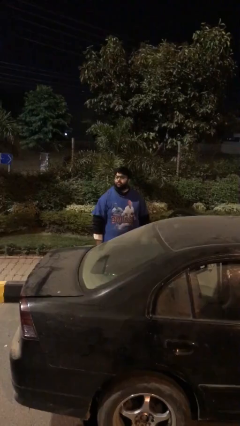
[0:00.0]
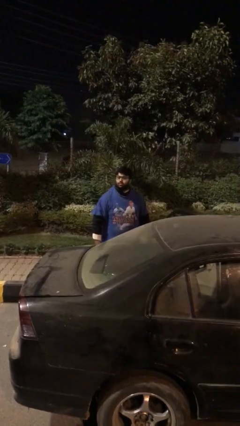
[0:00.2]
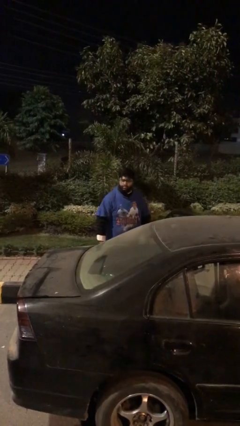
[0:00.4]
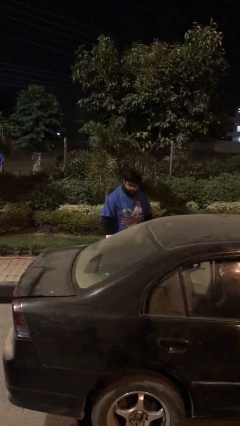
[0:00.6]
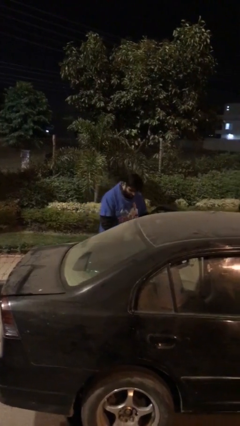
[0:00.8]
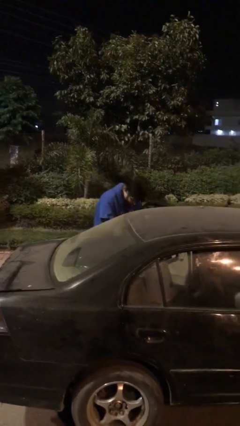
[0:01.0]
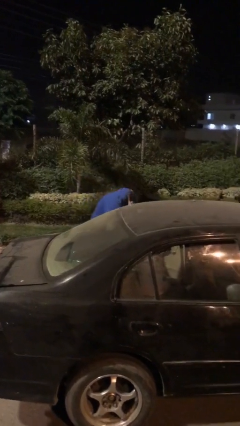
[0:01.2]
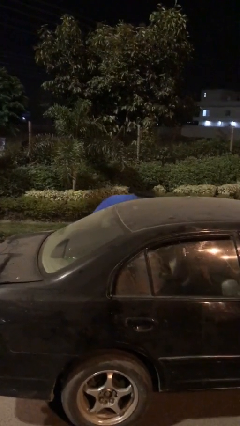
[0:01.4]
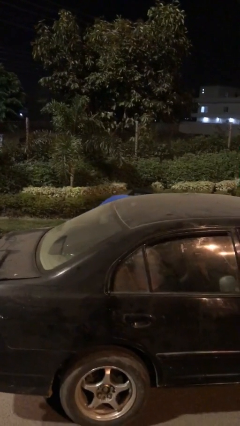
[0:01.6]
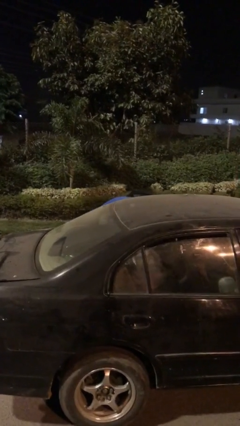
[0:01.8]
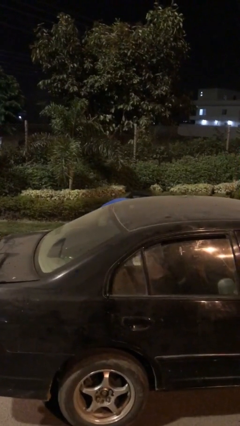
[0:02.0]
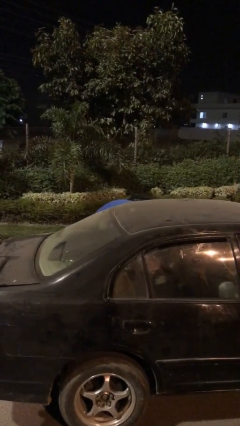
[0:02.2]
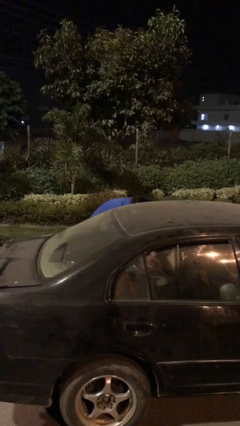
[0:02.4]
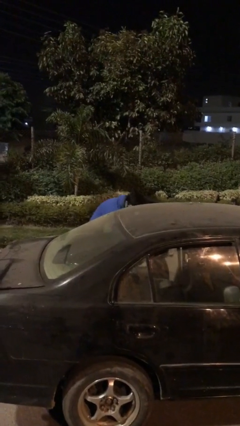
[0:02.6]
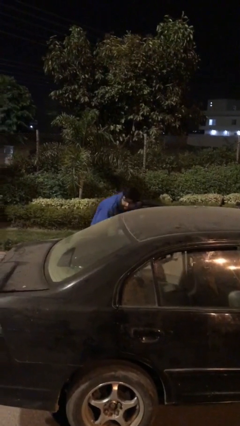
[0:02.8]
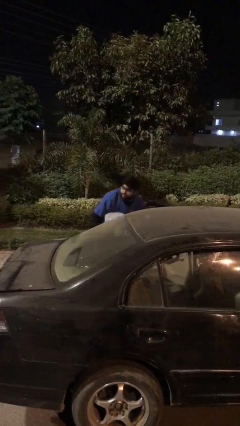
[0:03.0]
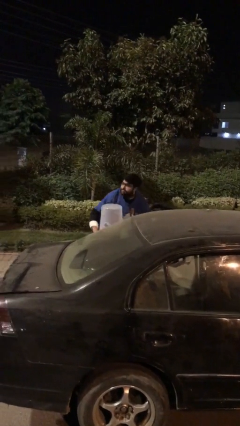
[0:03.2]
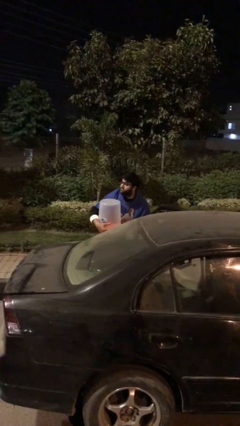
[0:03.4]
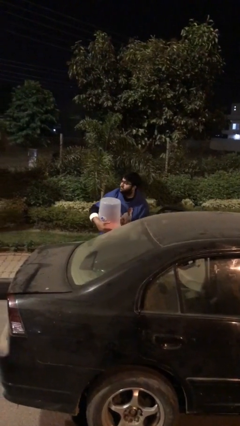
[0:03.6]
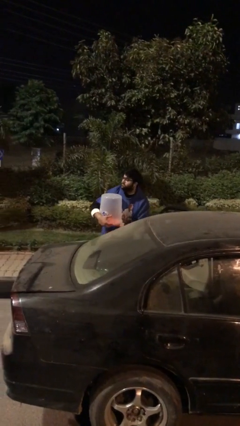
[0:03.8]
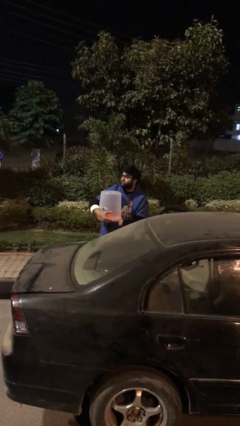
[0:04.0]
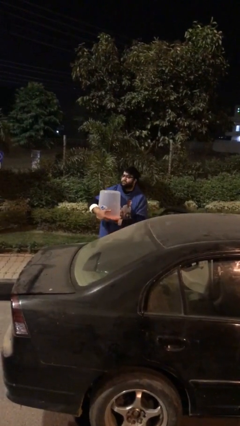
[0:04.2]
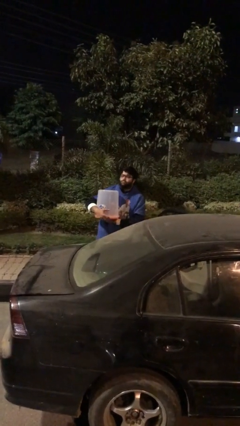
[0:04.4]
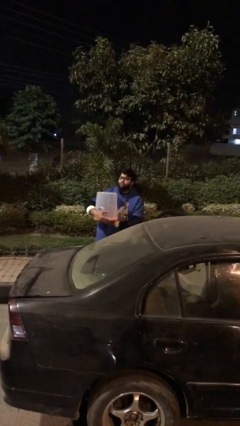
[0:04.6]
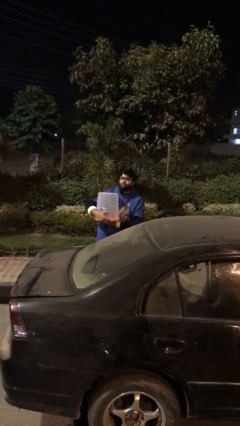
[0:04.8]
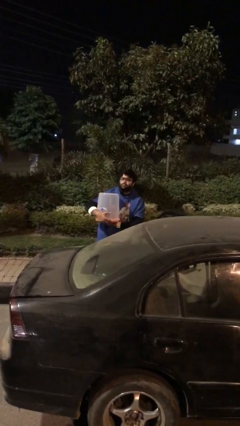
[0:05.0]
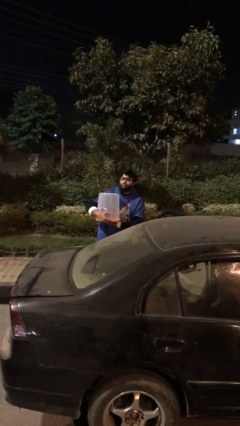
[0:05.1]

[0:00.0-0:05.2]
person unloads car

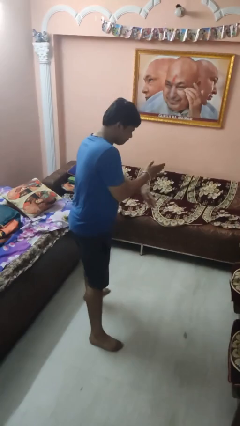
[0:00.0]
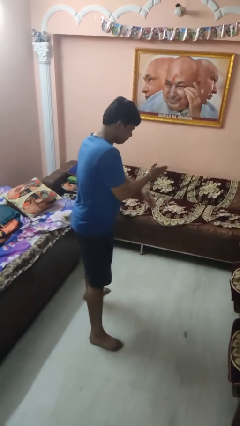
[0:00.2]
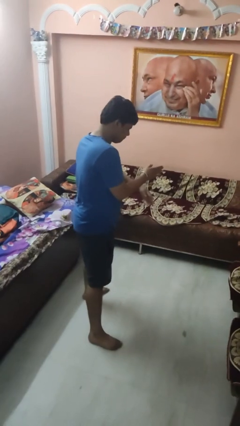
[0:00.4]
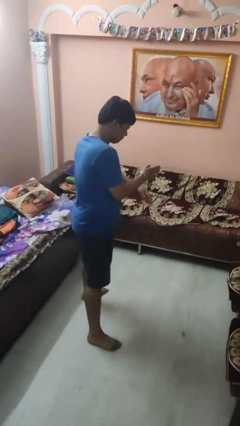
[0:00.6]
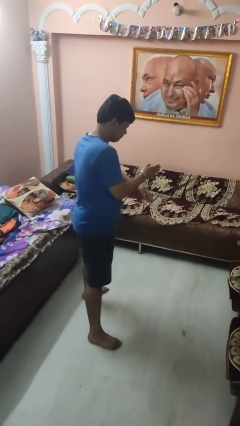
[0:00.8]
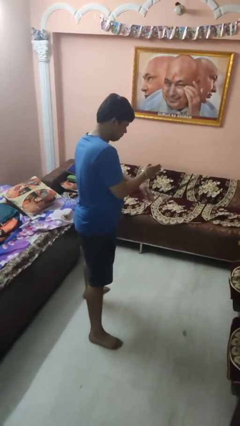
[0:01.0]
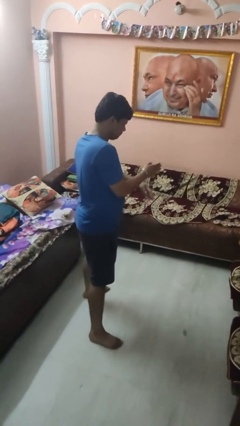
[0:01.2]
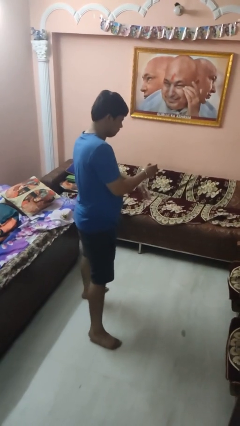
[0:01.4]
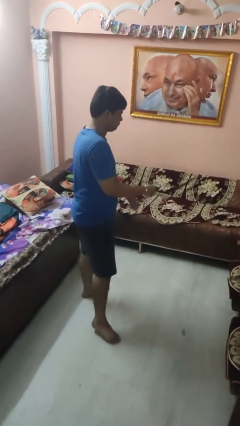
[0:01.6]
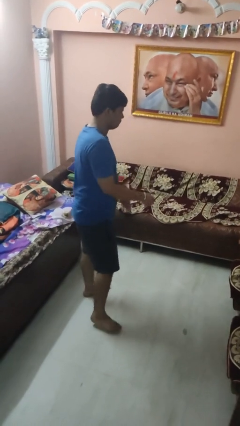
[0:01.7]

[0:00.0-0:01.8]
person karate chop

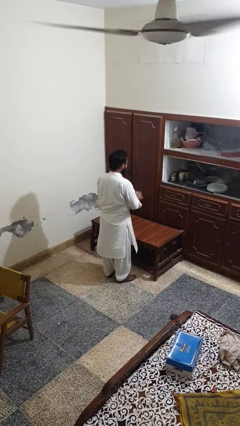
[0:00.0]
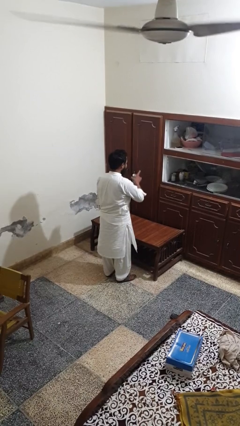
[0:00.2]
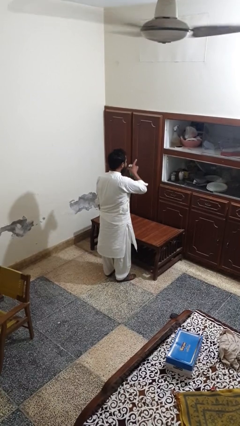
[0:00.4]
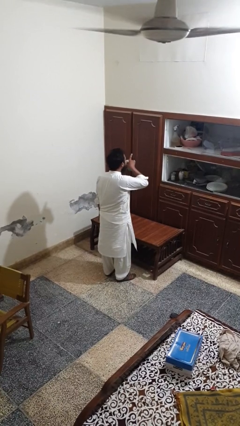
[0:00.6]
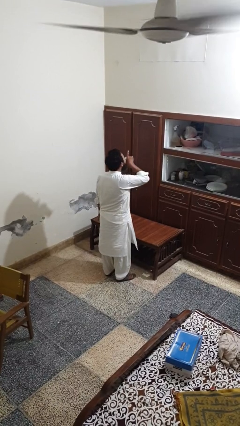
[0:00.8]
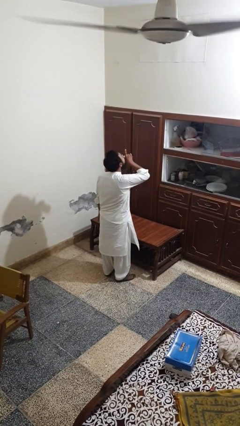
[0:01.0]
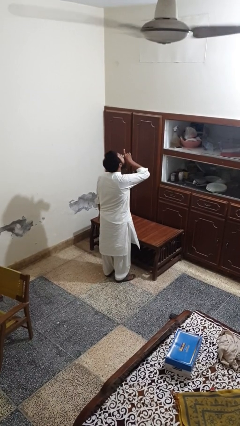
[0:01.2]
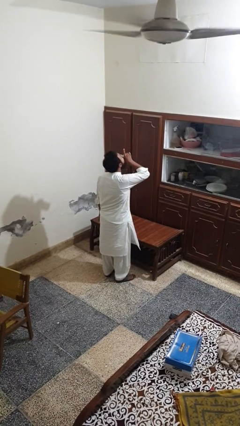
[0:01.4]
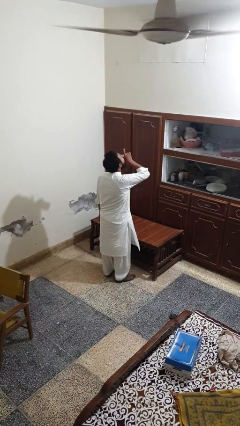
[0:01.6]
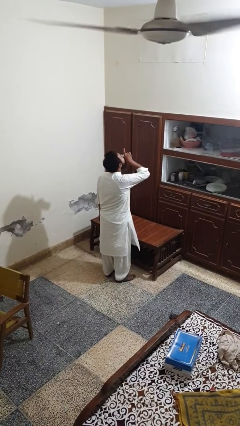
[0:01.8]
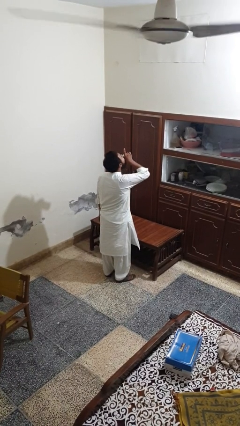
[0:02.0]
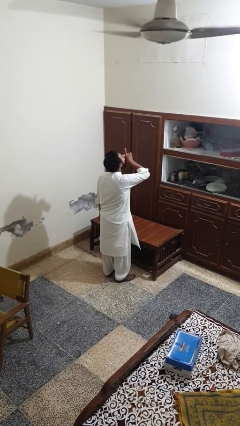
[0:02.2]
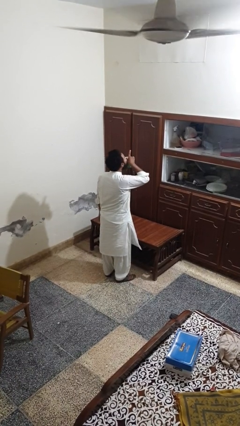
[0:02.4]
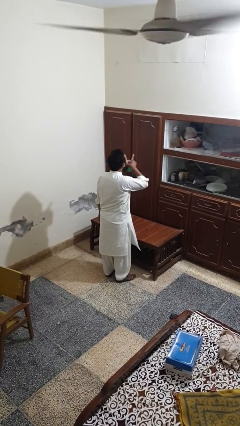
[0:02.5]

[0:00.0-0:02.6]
person drinks from beverage can

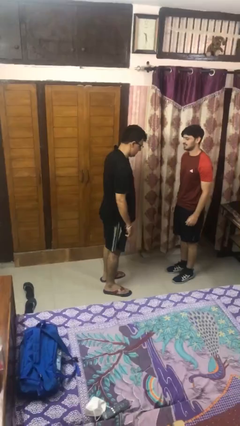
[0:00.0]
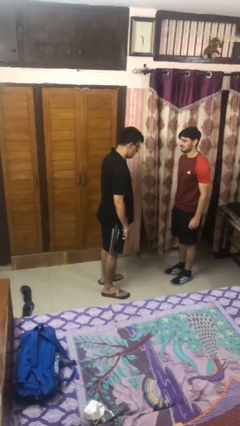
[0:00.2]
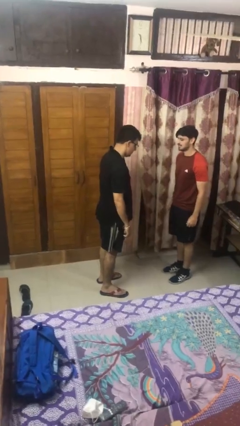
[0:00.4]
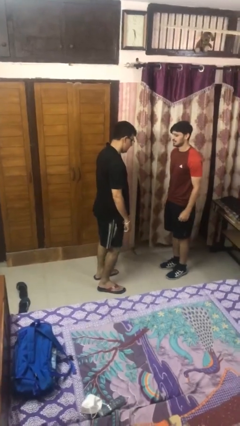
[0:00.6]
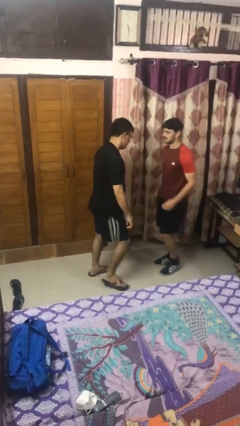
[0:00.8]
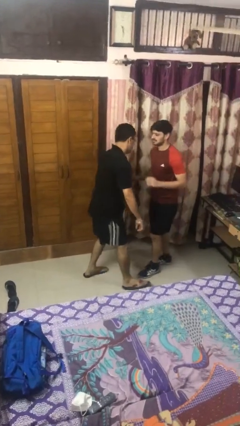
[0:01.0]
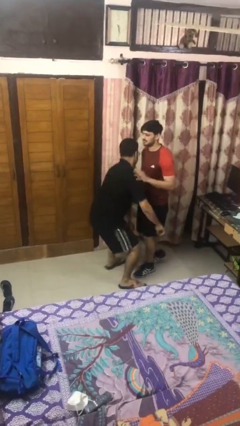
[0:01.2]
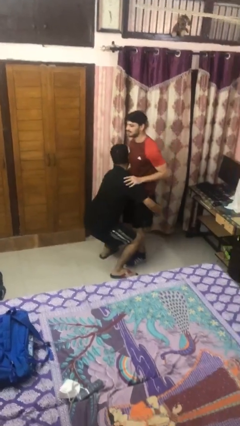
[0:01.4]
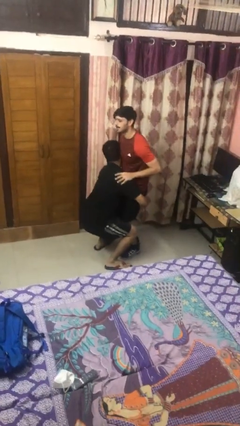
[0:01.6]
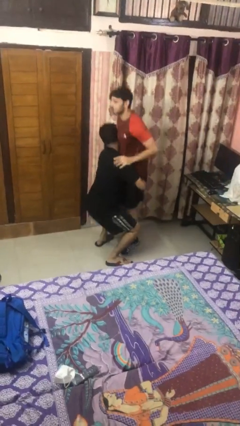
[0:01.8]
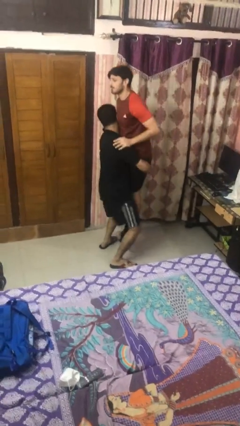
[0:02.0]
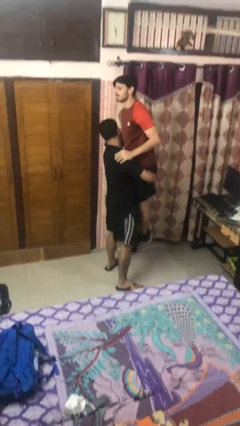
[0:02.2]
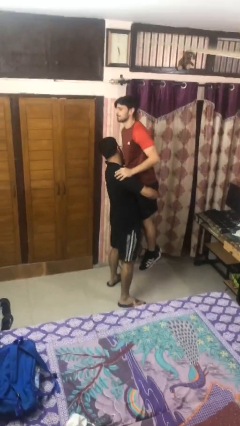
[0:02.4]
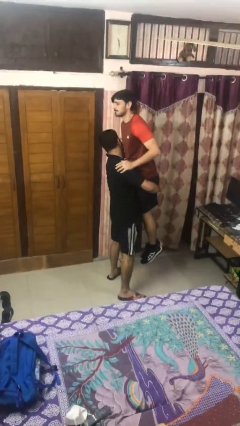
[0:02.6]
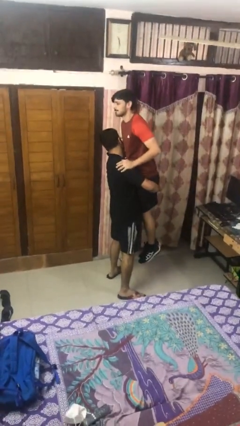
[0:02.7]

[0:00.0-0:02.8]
person picks up person

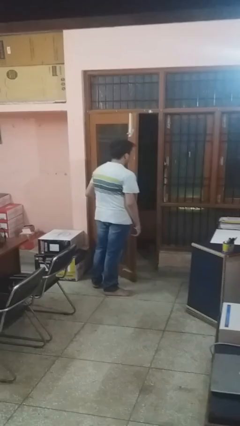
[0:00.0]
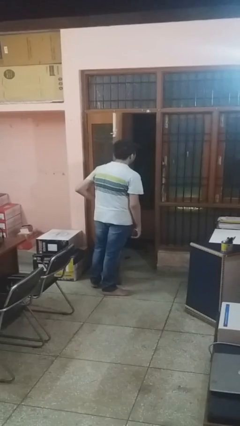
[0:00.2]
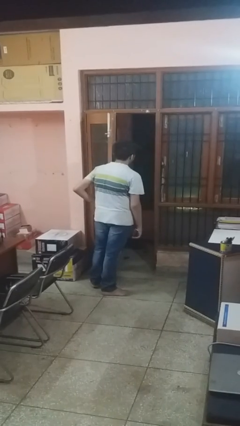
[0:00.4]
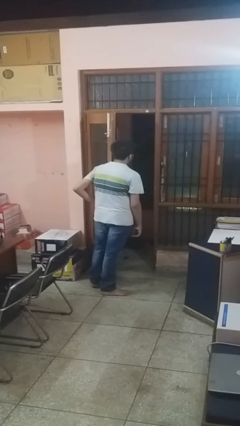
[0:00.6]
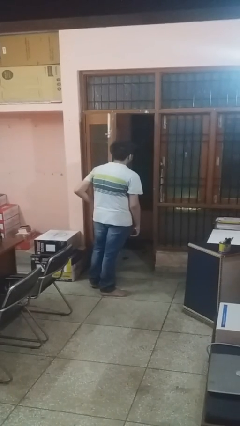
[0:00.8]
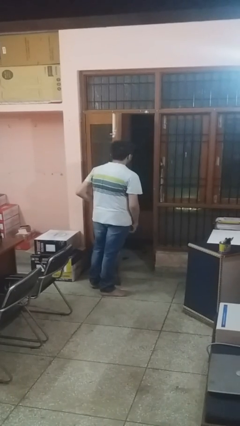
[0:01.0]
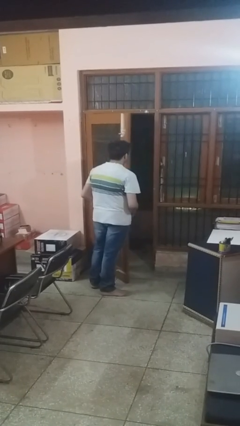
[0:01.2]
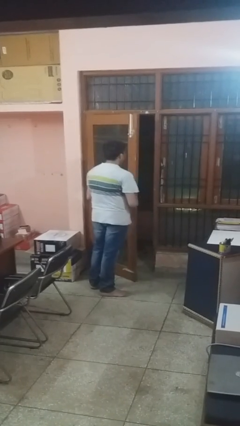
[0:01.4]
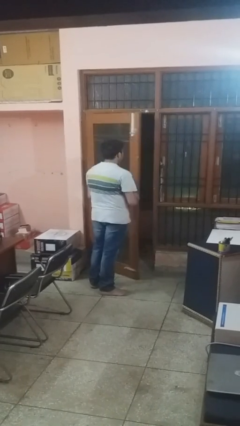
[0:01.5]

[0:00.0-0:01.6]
person opens facility door

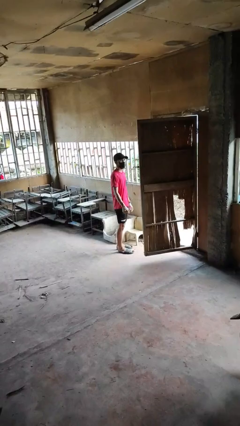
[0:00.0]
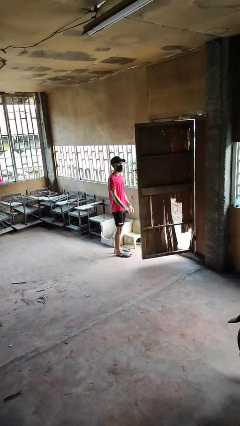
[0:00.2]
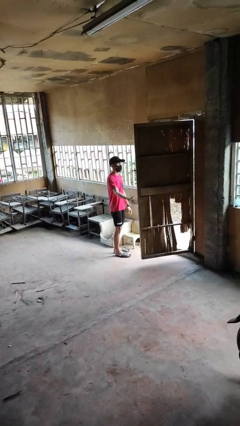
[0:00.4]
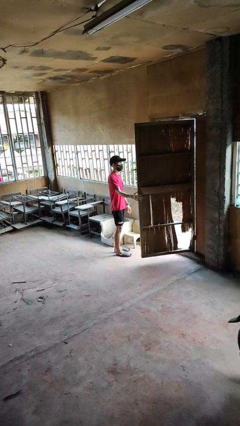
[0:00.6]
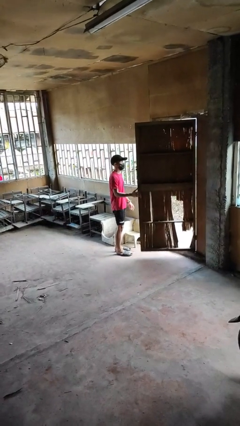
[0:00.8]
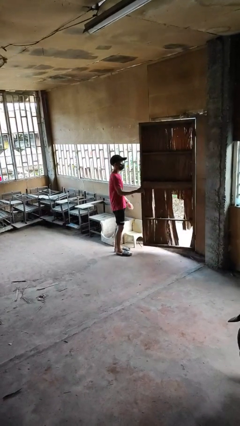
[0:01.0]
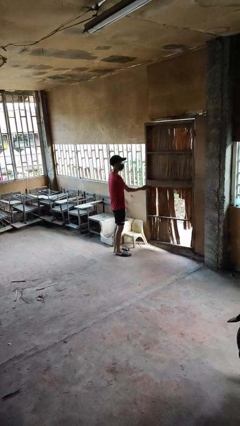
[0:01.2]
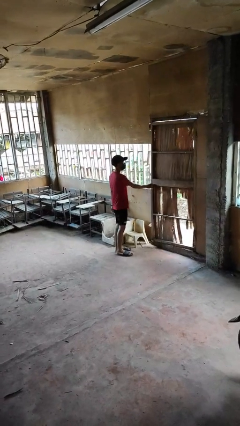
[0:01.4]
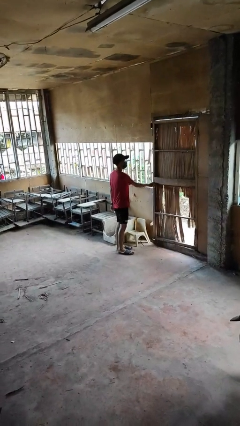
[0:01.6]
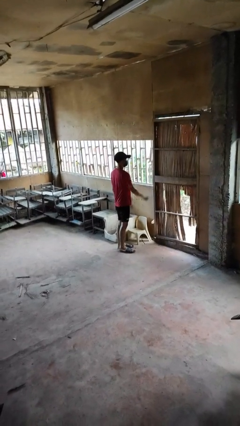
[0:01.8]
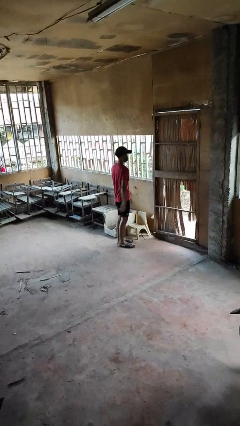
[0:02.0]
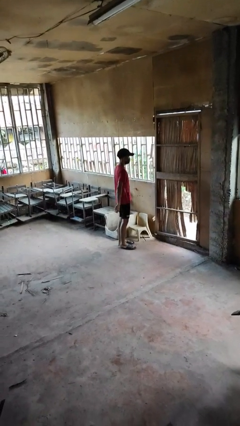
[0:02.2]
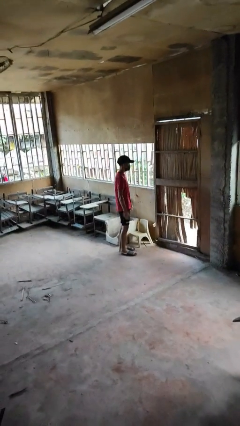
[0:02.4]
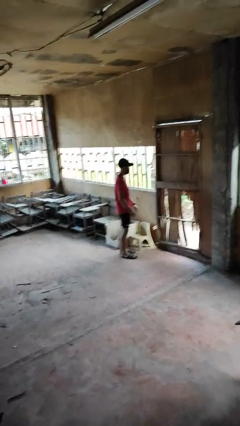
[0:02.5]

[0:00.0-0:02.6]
person closes facility door

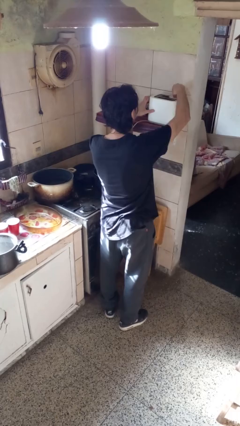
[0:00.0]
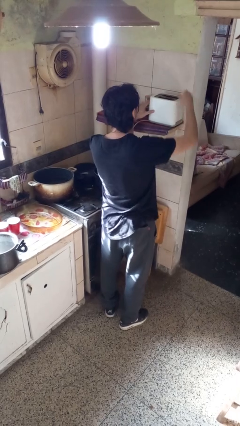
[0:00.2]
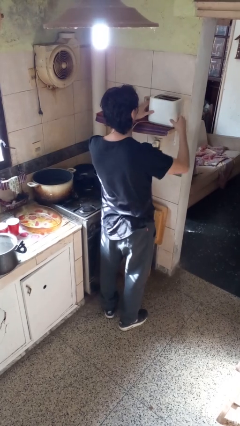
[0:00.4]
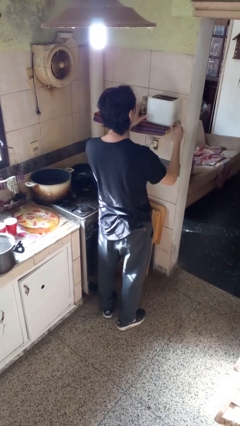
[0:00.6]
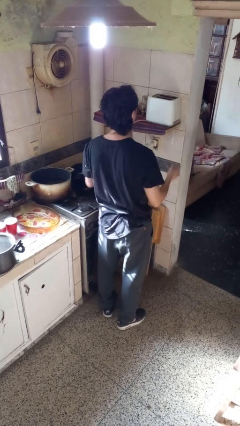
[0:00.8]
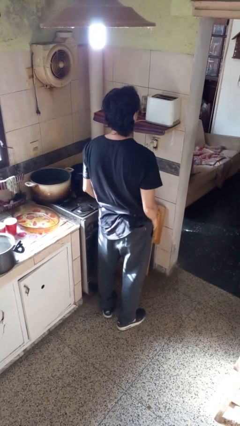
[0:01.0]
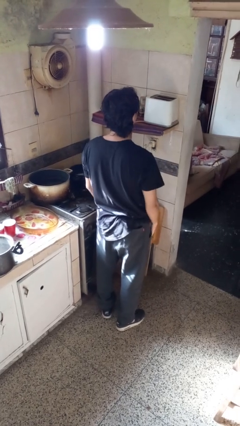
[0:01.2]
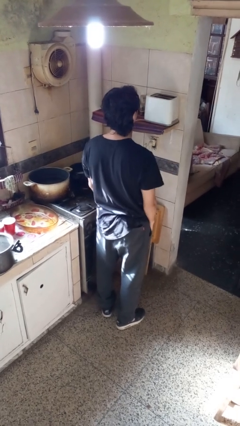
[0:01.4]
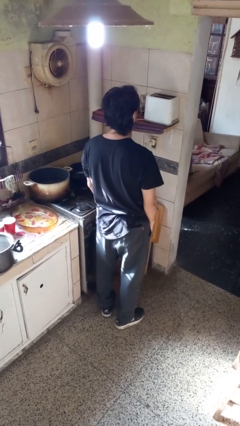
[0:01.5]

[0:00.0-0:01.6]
person puts object into toaster
